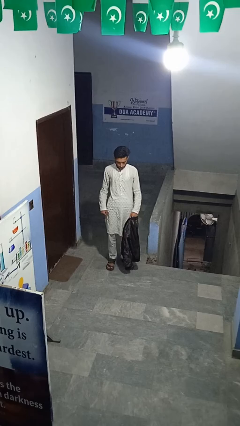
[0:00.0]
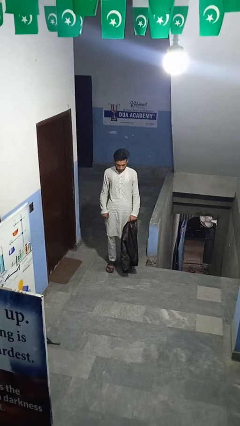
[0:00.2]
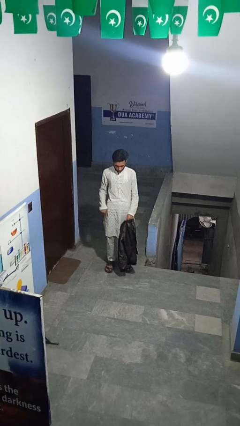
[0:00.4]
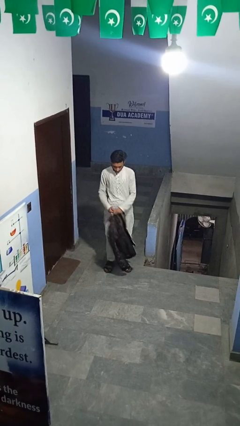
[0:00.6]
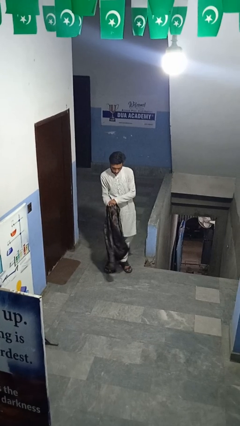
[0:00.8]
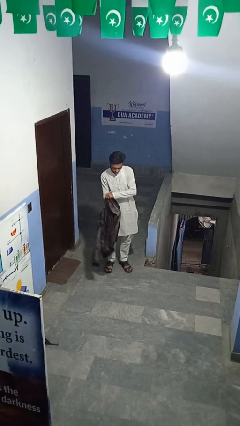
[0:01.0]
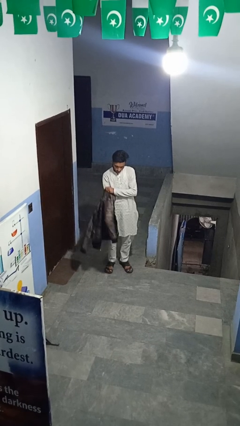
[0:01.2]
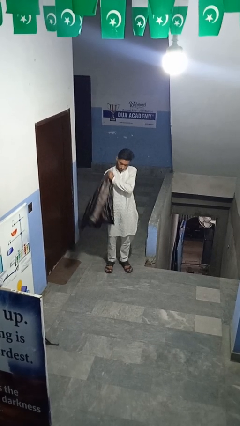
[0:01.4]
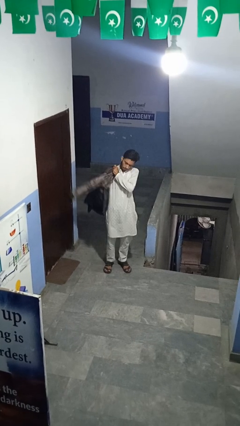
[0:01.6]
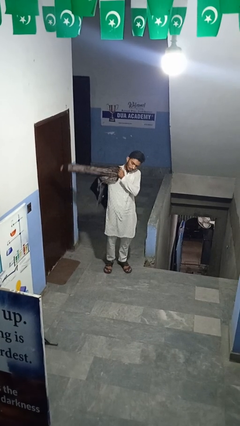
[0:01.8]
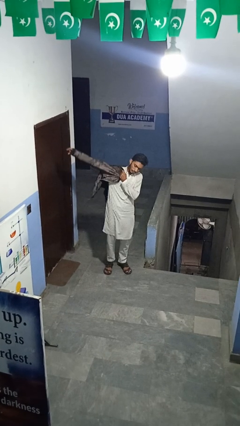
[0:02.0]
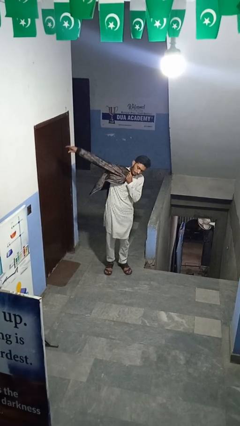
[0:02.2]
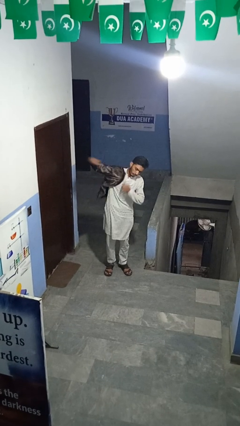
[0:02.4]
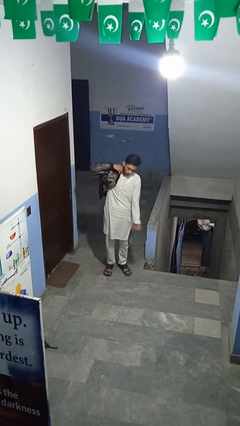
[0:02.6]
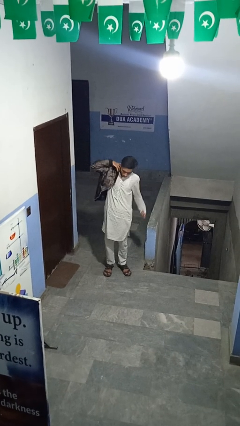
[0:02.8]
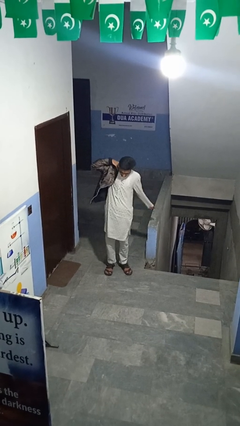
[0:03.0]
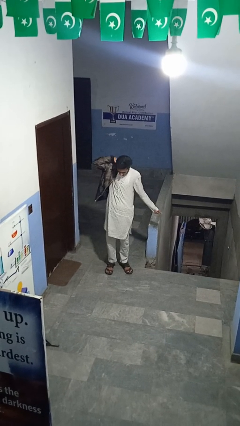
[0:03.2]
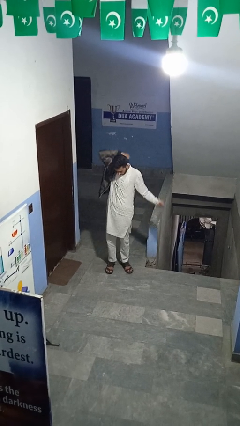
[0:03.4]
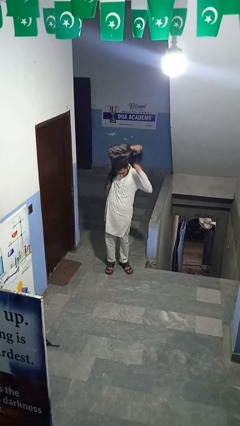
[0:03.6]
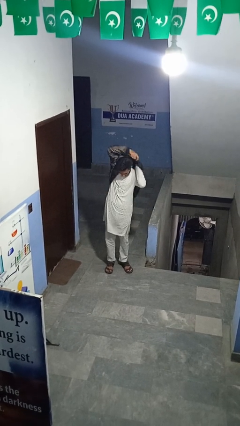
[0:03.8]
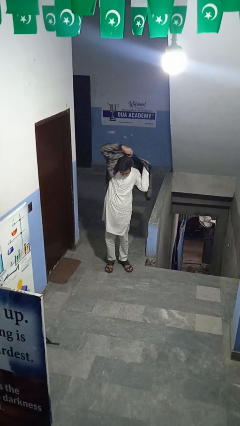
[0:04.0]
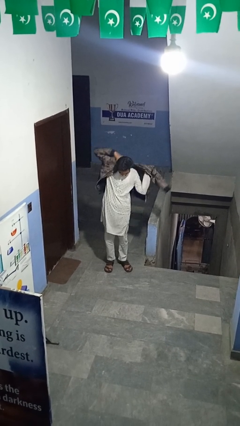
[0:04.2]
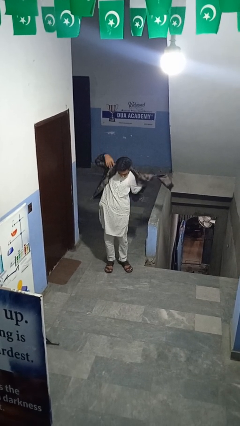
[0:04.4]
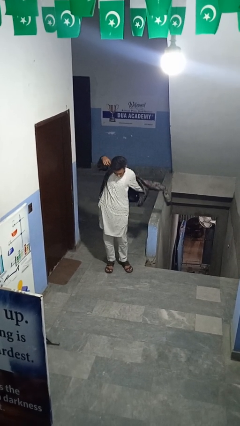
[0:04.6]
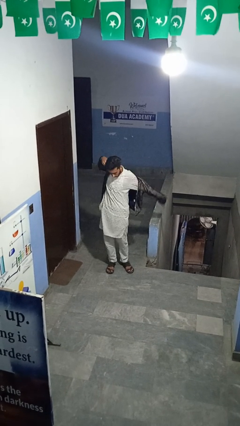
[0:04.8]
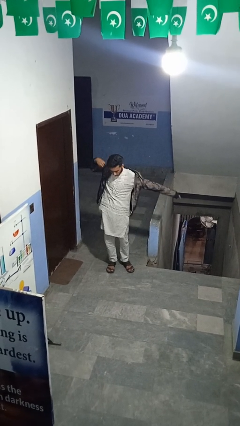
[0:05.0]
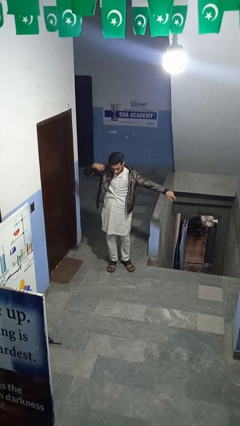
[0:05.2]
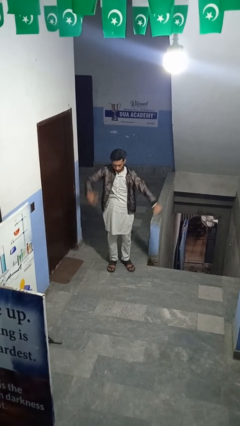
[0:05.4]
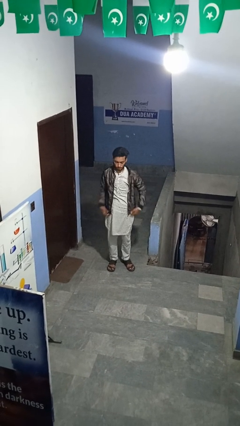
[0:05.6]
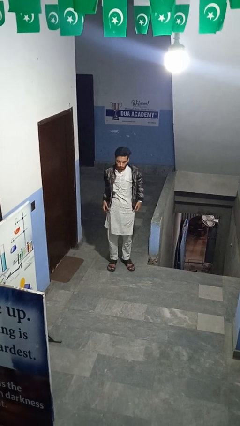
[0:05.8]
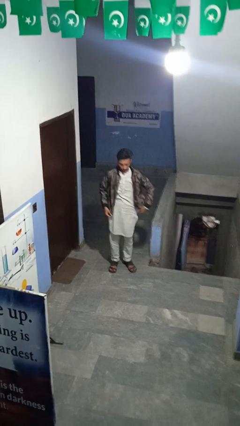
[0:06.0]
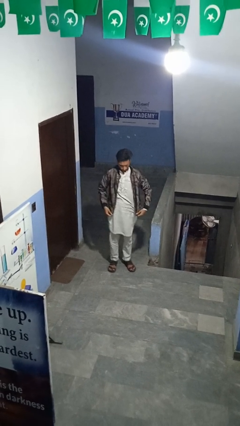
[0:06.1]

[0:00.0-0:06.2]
person puts on jacket

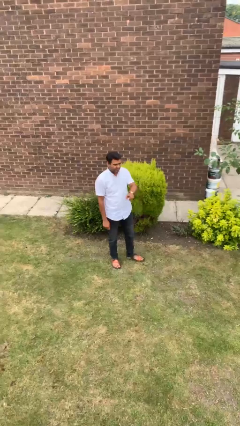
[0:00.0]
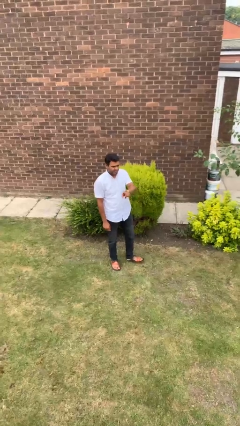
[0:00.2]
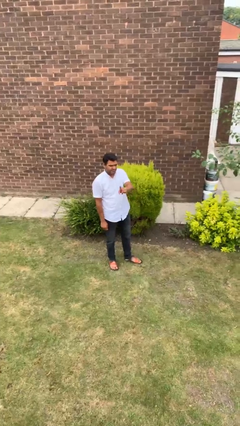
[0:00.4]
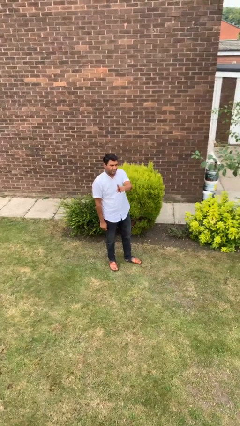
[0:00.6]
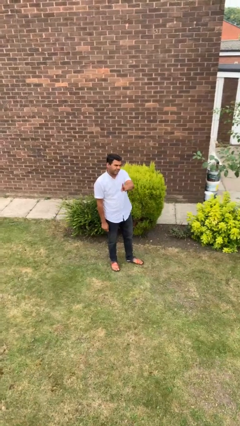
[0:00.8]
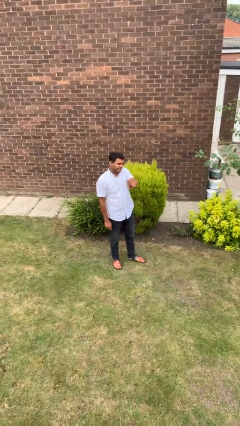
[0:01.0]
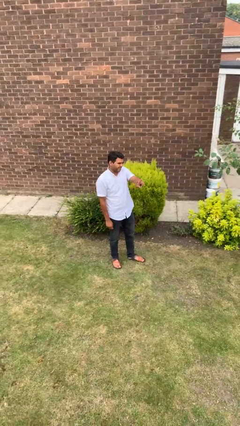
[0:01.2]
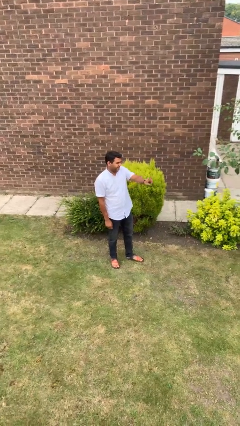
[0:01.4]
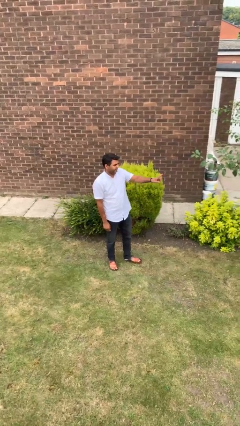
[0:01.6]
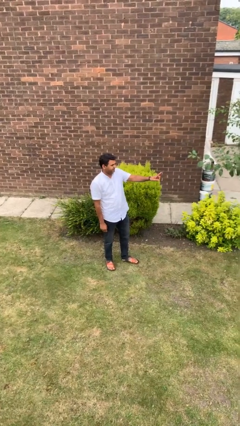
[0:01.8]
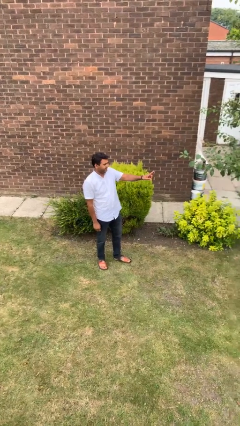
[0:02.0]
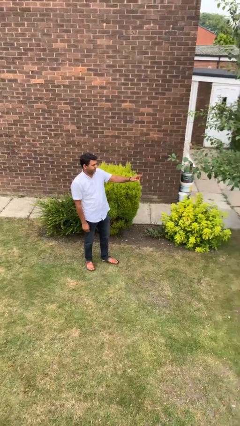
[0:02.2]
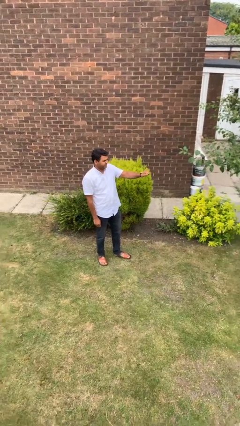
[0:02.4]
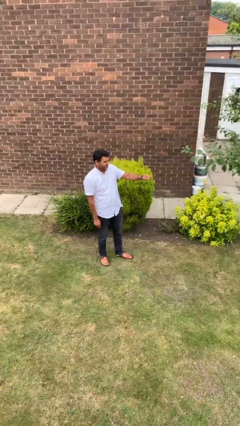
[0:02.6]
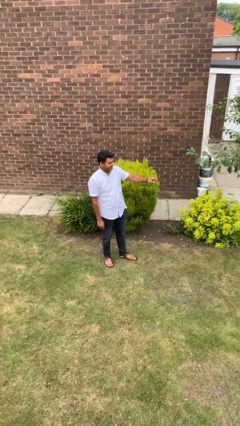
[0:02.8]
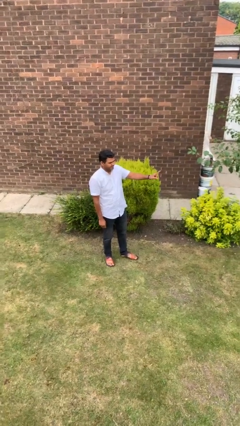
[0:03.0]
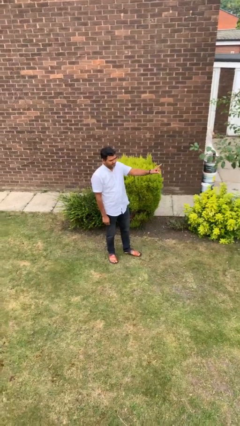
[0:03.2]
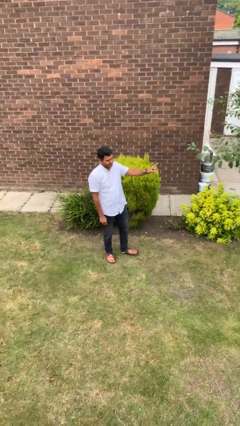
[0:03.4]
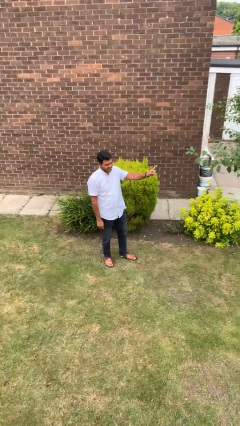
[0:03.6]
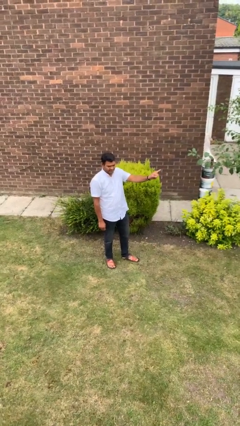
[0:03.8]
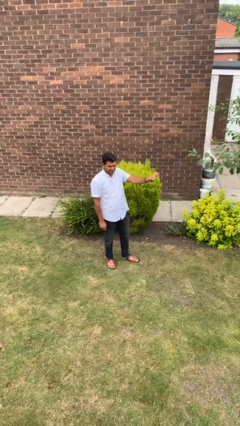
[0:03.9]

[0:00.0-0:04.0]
person gestures swipe left

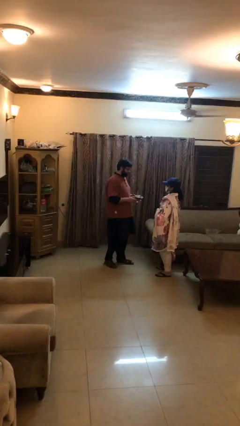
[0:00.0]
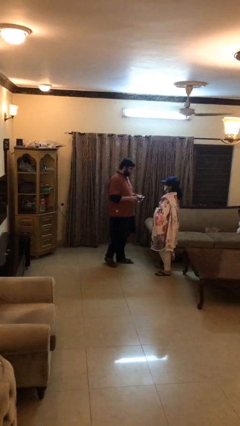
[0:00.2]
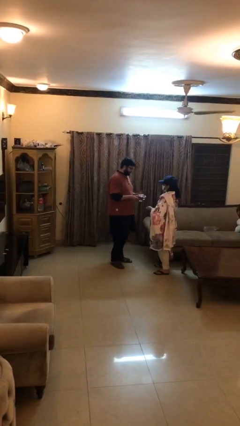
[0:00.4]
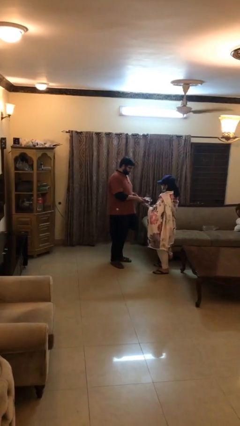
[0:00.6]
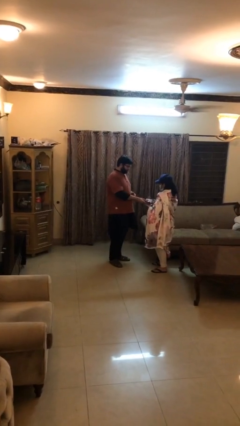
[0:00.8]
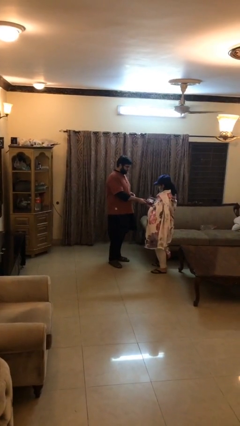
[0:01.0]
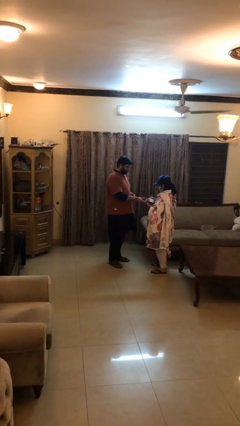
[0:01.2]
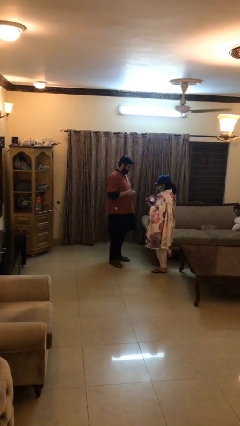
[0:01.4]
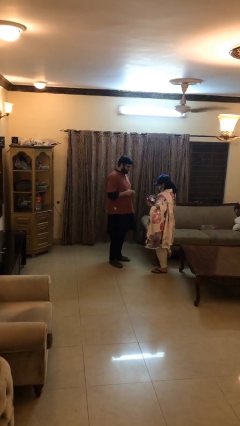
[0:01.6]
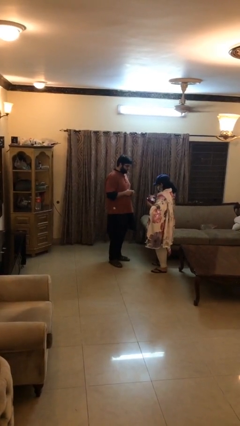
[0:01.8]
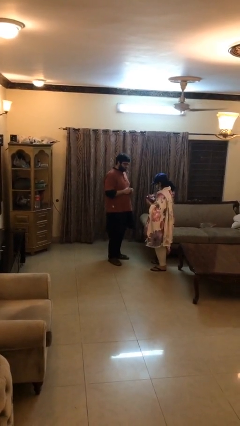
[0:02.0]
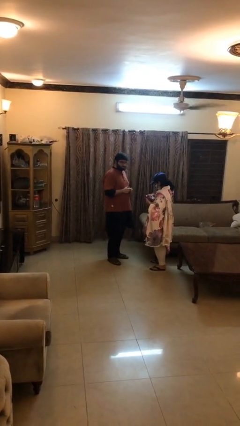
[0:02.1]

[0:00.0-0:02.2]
person transfers object to person

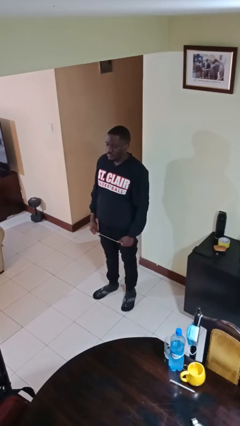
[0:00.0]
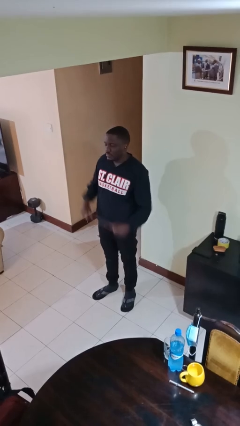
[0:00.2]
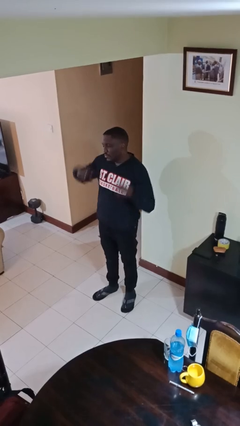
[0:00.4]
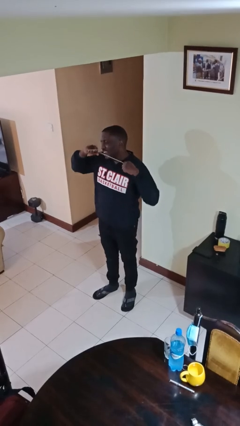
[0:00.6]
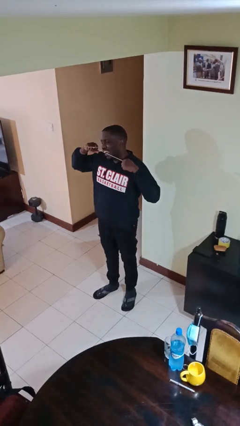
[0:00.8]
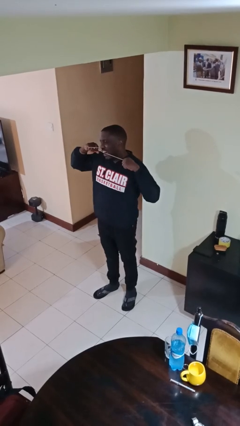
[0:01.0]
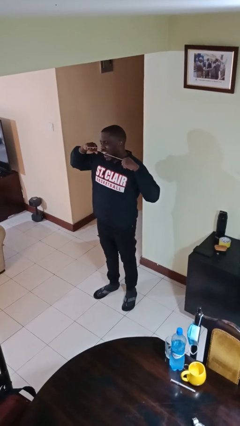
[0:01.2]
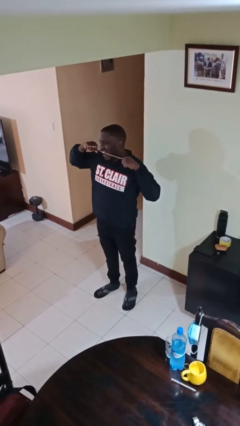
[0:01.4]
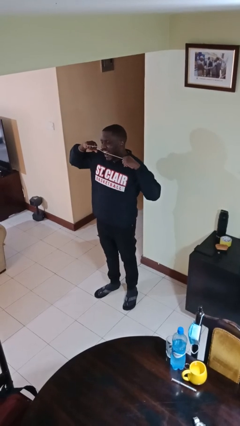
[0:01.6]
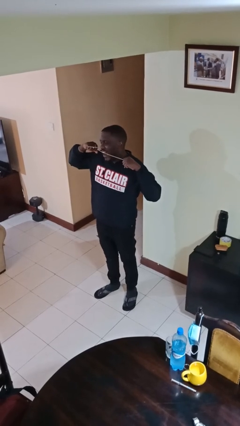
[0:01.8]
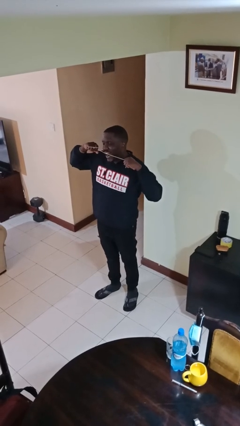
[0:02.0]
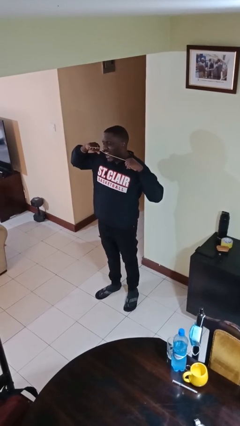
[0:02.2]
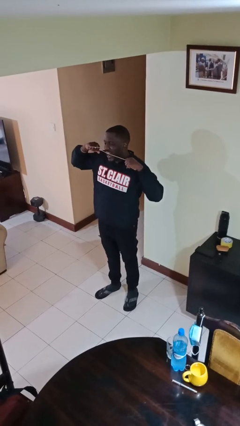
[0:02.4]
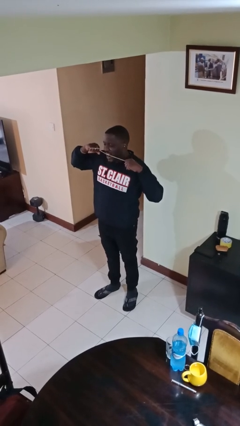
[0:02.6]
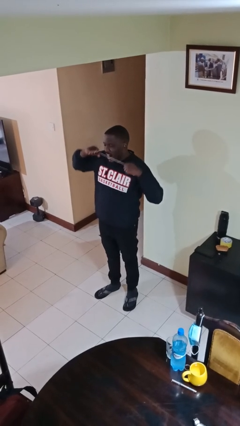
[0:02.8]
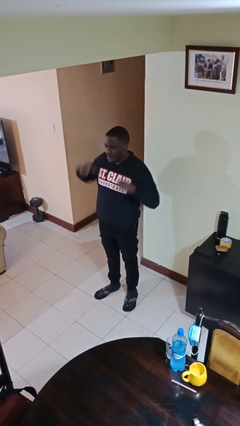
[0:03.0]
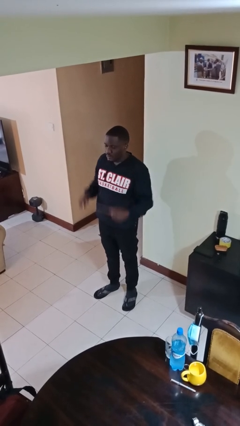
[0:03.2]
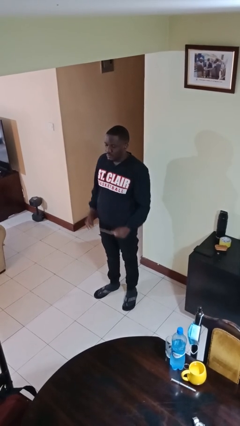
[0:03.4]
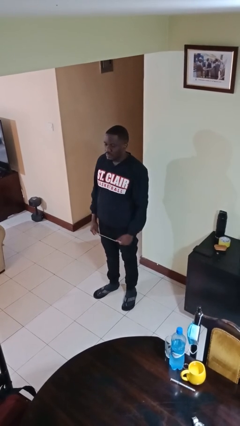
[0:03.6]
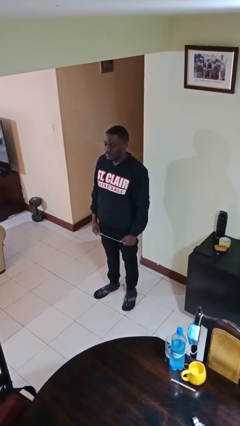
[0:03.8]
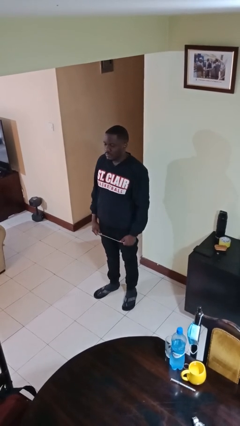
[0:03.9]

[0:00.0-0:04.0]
person flosses

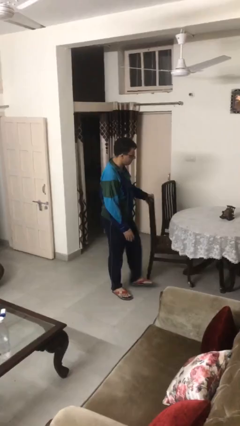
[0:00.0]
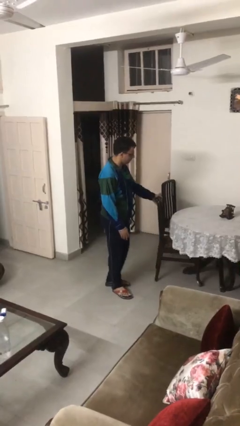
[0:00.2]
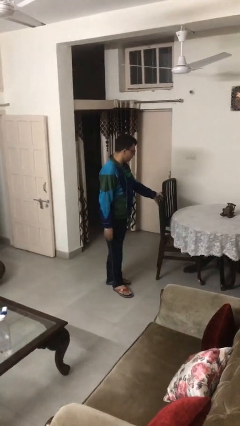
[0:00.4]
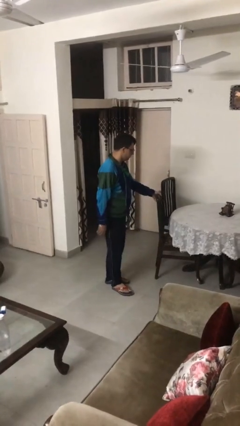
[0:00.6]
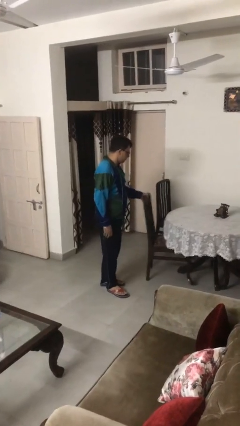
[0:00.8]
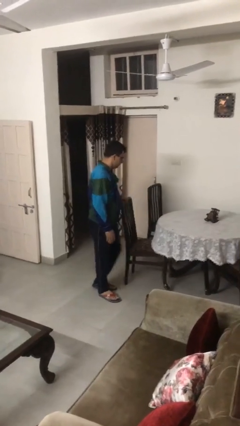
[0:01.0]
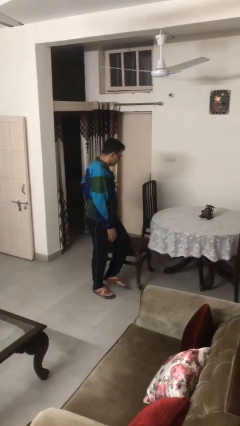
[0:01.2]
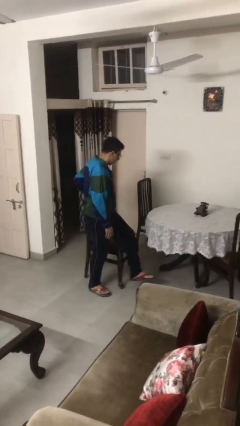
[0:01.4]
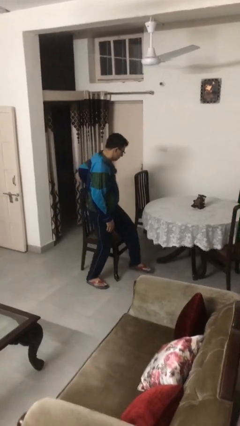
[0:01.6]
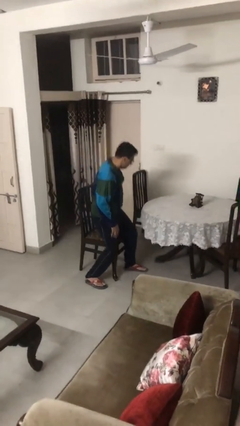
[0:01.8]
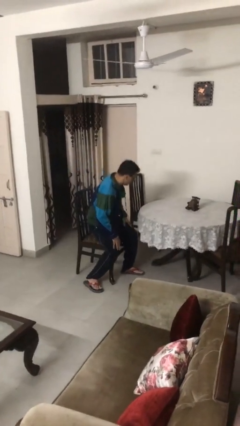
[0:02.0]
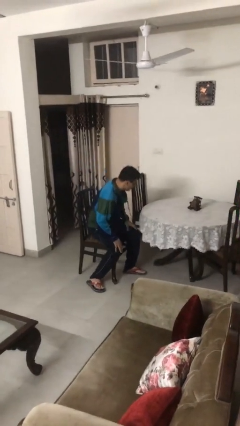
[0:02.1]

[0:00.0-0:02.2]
person sits down
